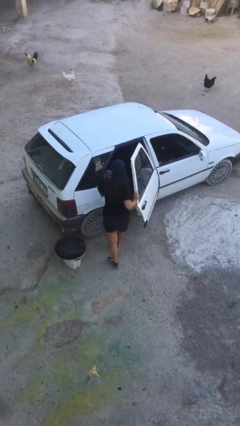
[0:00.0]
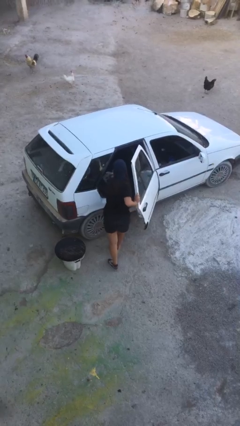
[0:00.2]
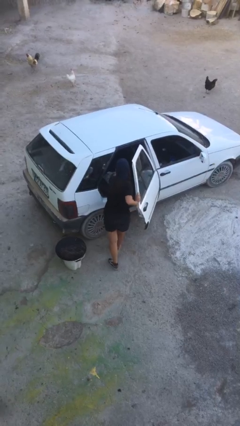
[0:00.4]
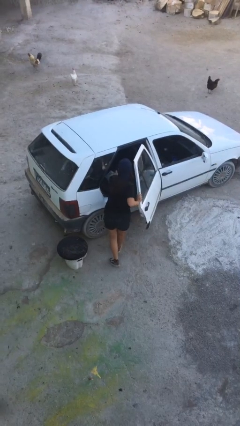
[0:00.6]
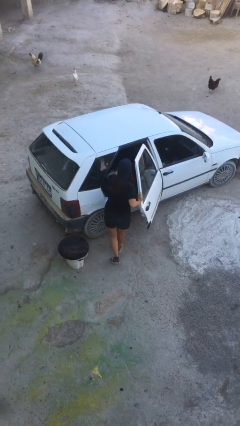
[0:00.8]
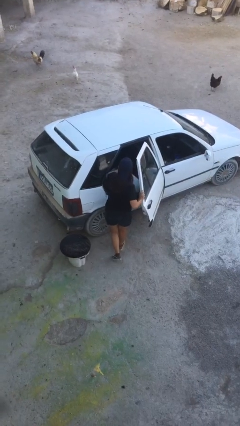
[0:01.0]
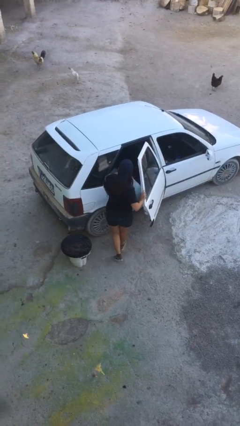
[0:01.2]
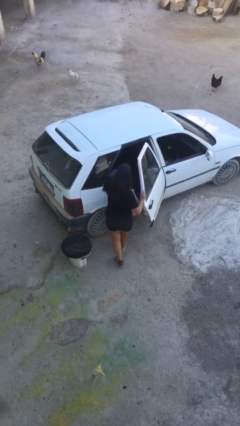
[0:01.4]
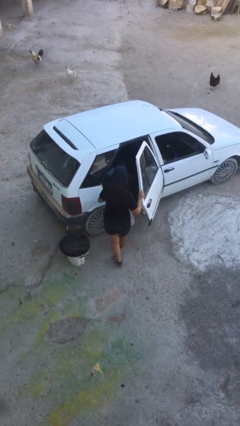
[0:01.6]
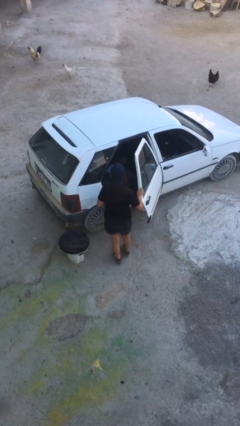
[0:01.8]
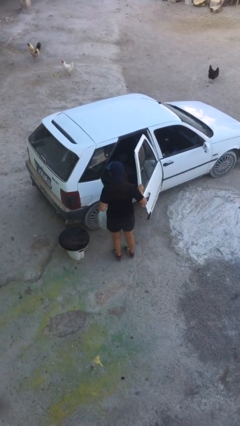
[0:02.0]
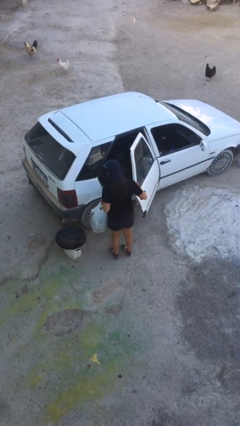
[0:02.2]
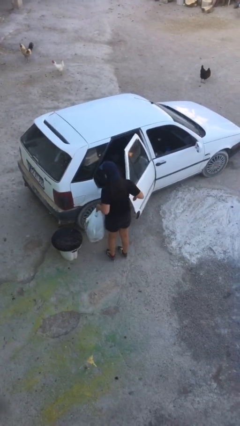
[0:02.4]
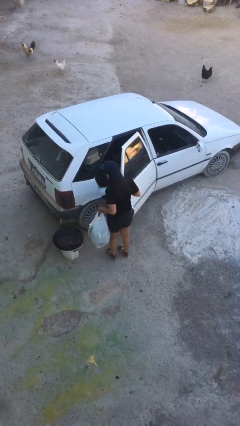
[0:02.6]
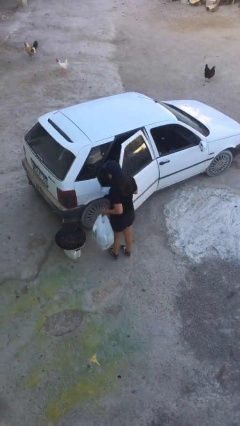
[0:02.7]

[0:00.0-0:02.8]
person unloads car

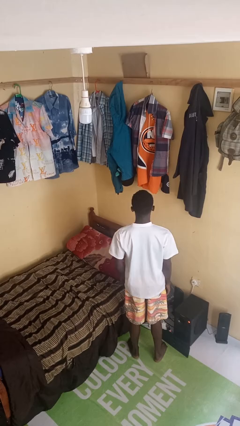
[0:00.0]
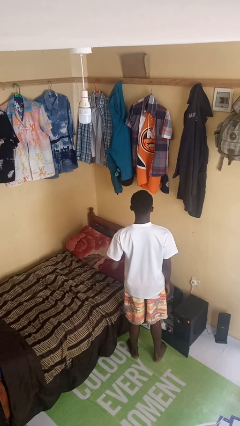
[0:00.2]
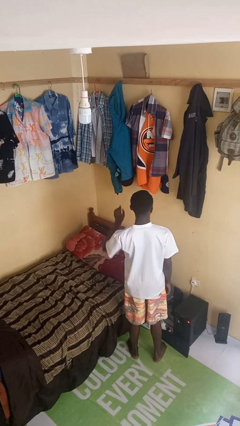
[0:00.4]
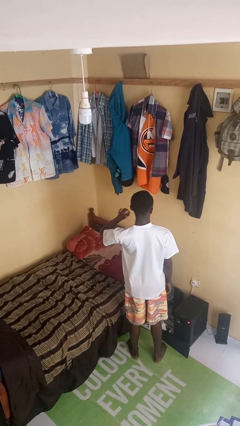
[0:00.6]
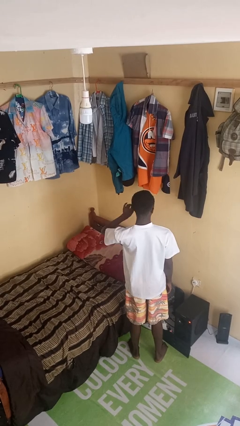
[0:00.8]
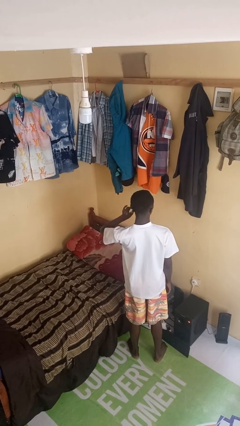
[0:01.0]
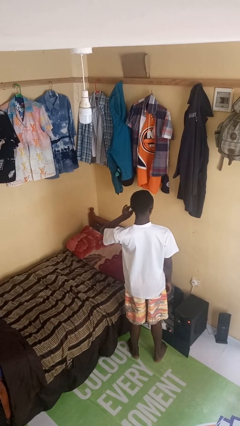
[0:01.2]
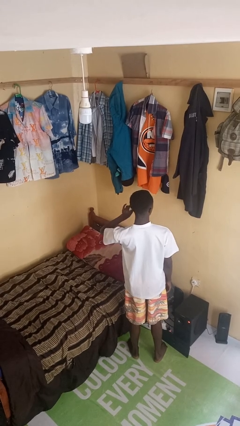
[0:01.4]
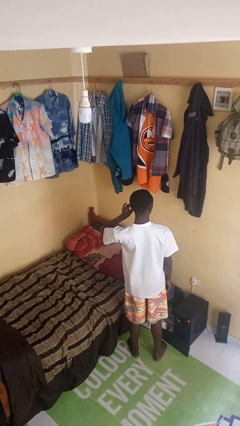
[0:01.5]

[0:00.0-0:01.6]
person gestures listen closely

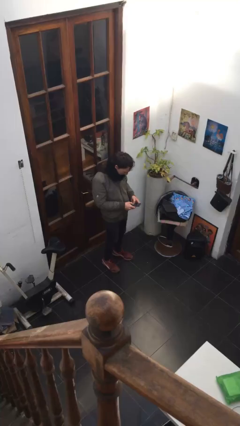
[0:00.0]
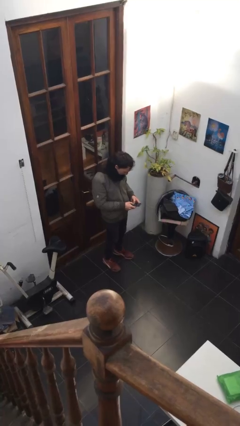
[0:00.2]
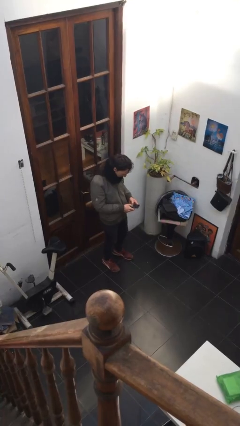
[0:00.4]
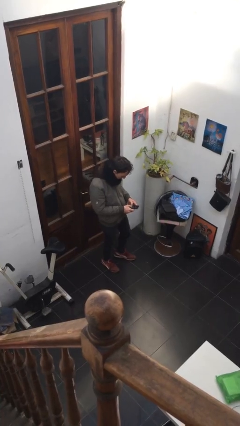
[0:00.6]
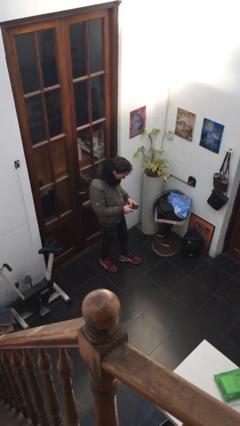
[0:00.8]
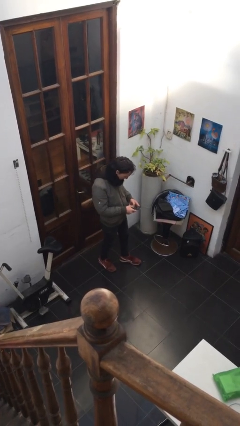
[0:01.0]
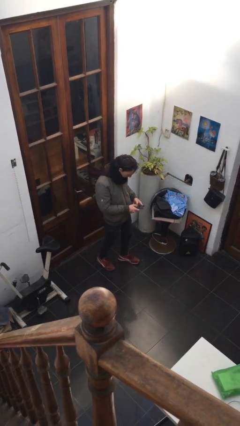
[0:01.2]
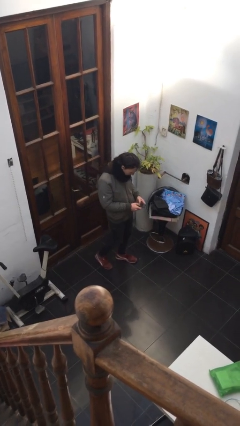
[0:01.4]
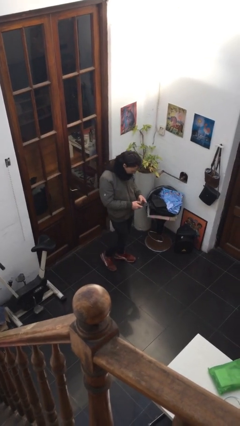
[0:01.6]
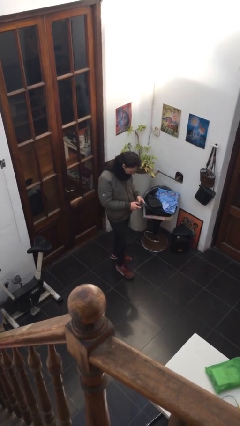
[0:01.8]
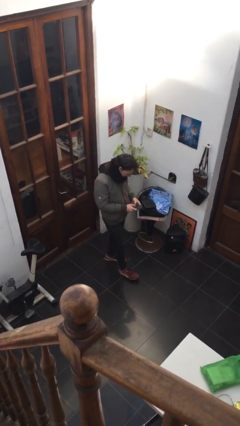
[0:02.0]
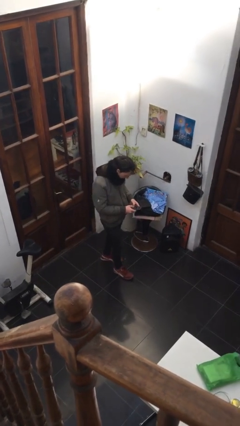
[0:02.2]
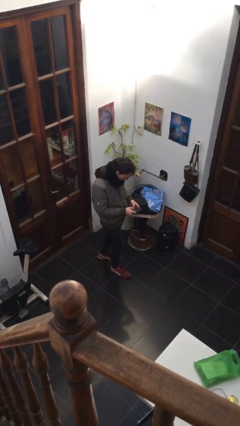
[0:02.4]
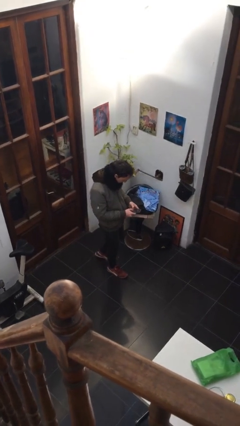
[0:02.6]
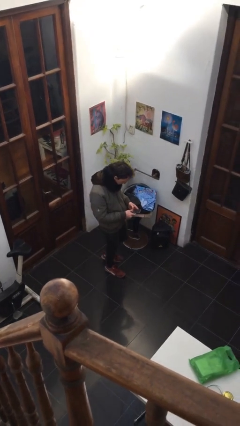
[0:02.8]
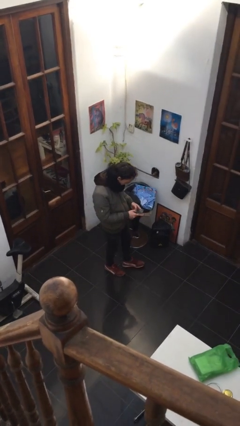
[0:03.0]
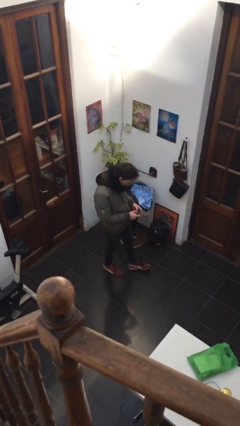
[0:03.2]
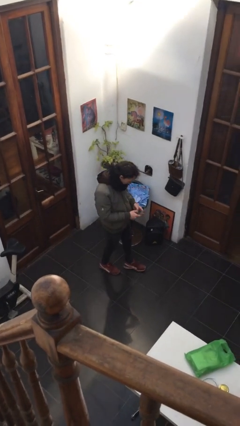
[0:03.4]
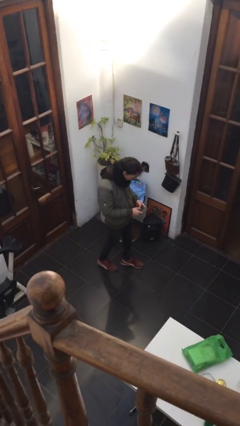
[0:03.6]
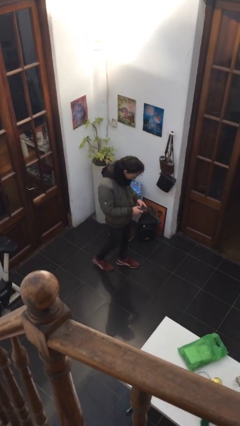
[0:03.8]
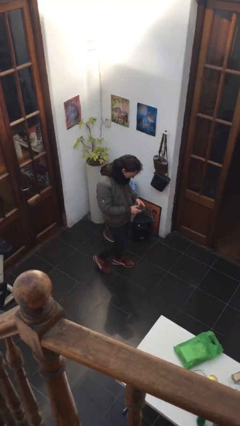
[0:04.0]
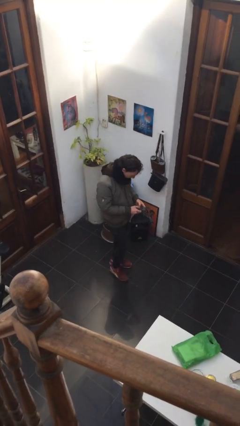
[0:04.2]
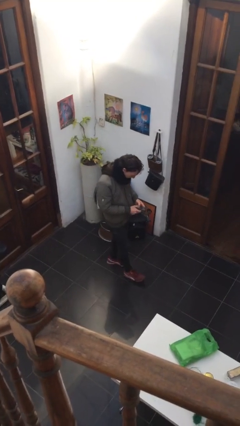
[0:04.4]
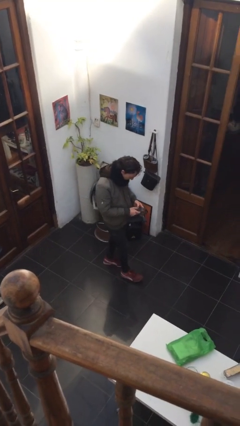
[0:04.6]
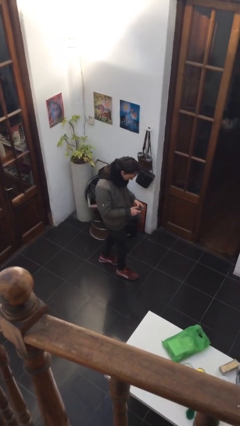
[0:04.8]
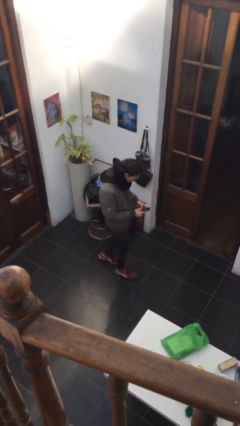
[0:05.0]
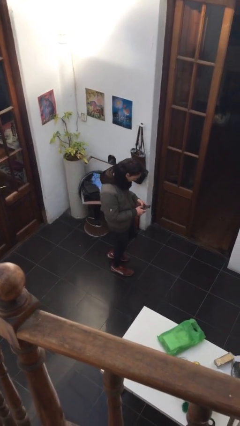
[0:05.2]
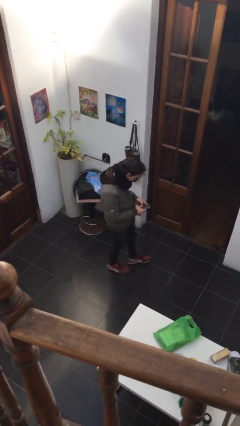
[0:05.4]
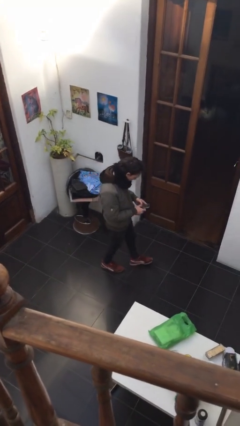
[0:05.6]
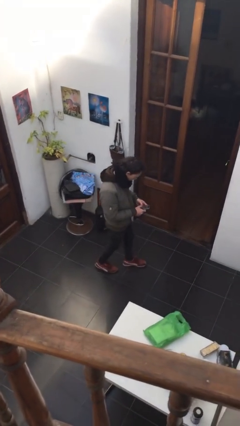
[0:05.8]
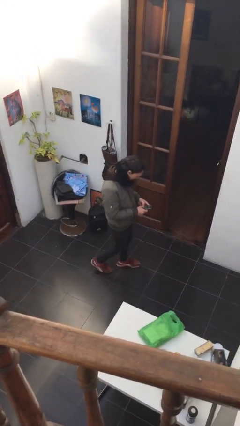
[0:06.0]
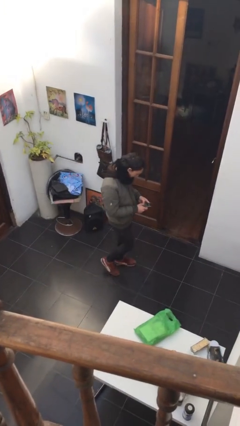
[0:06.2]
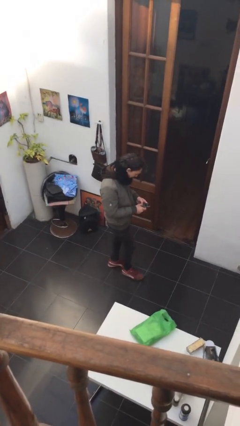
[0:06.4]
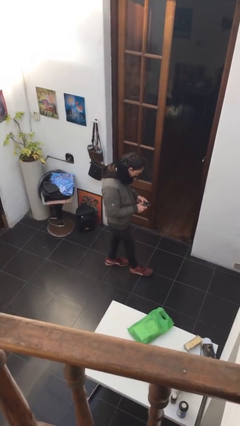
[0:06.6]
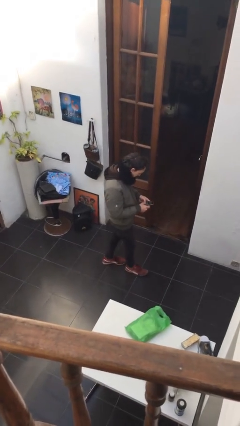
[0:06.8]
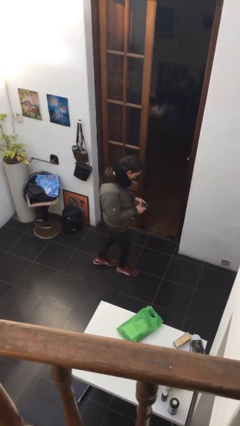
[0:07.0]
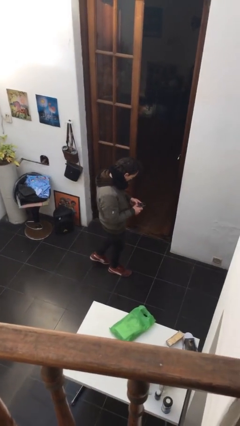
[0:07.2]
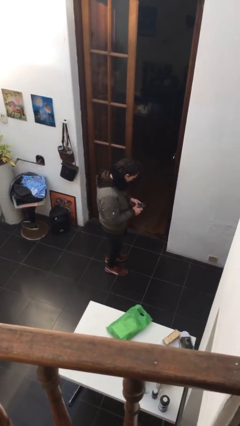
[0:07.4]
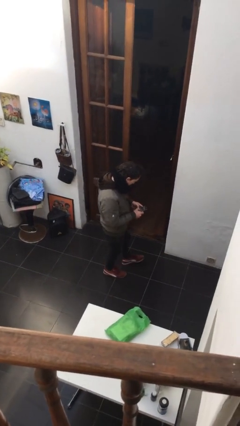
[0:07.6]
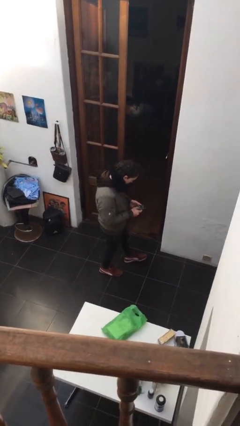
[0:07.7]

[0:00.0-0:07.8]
person texts on phone

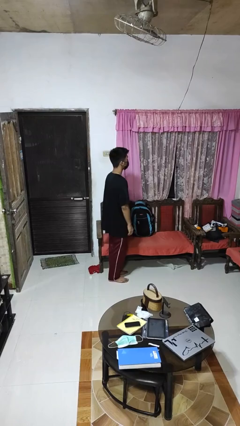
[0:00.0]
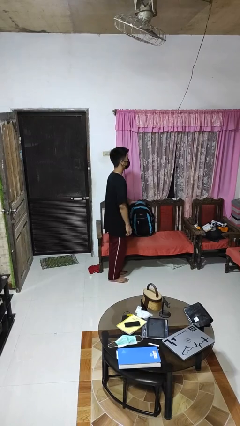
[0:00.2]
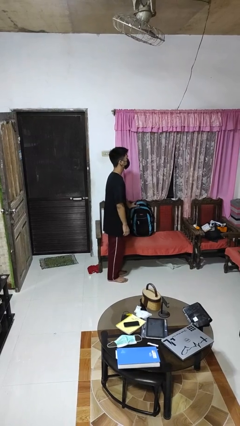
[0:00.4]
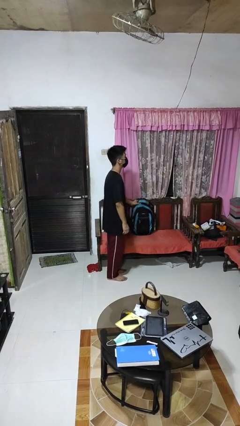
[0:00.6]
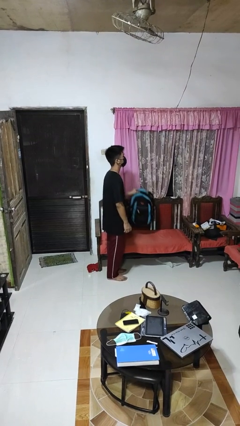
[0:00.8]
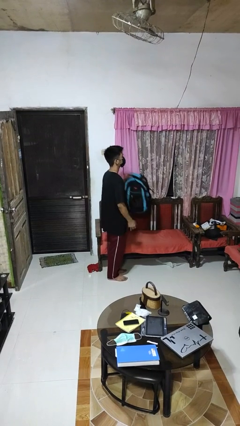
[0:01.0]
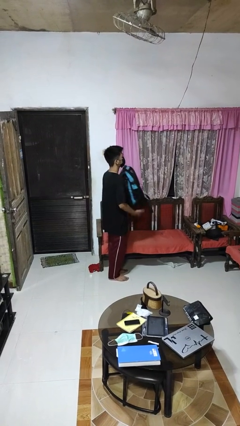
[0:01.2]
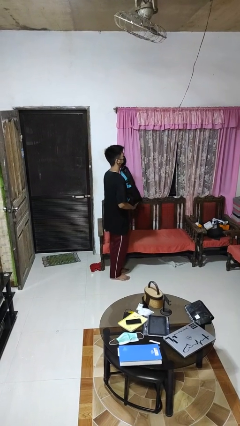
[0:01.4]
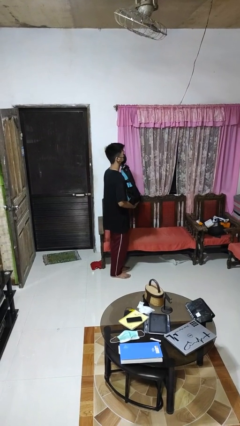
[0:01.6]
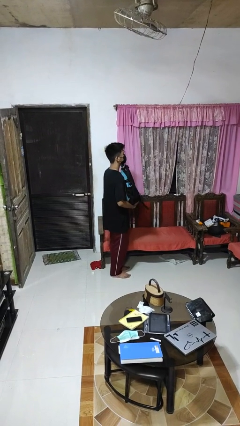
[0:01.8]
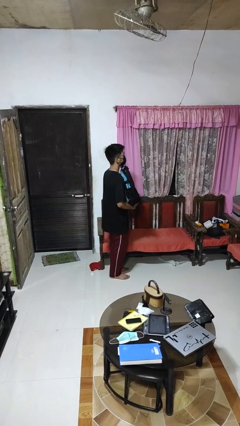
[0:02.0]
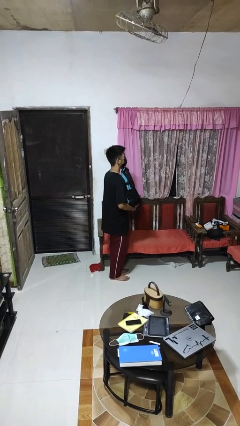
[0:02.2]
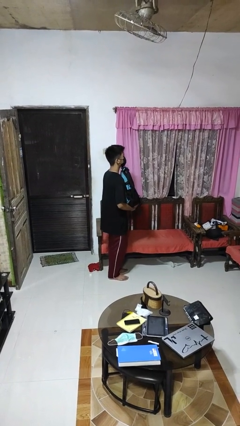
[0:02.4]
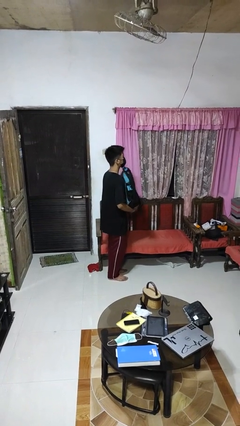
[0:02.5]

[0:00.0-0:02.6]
person picks up object from couch

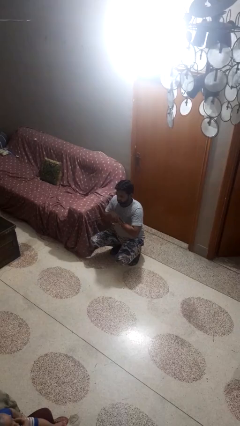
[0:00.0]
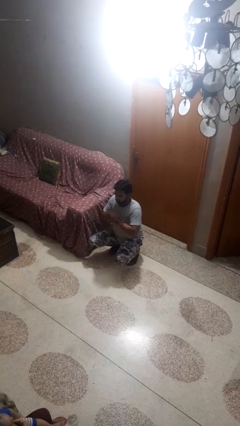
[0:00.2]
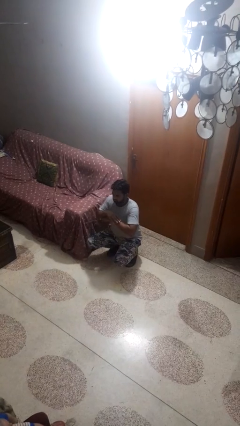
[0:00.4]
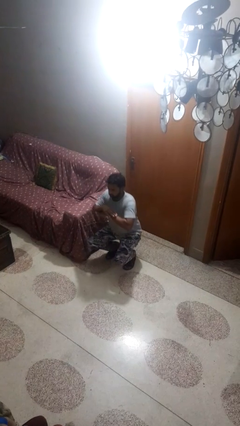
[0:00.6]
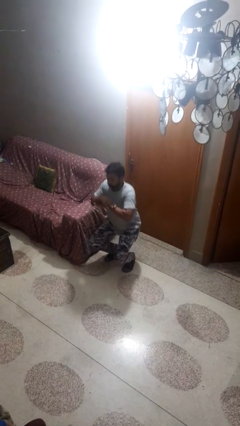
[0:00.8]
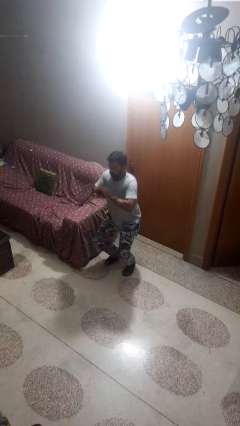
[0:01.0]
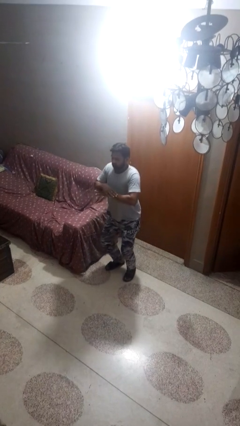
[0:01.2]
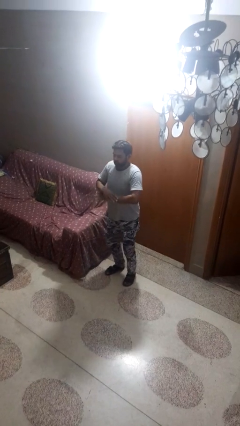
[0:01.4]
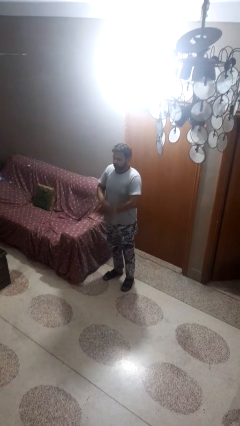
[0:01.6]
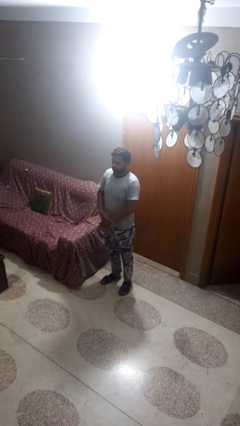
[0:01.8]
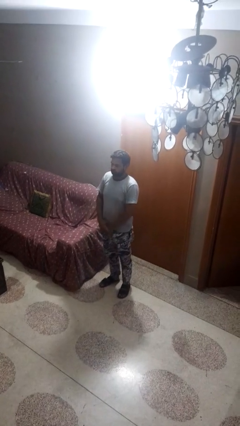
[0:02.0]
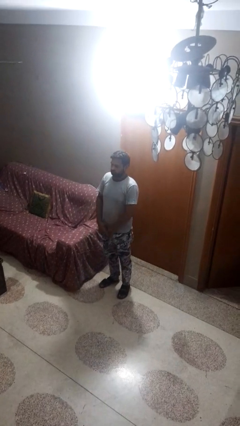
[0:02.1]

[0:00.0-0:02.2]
person stands up

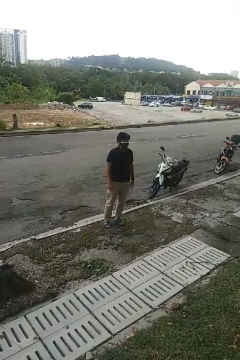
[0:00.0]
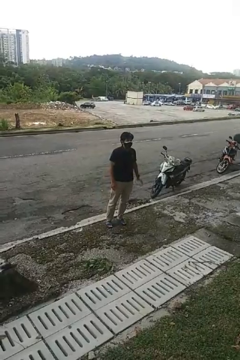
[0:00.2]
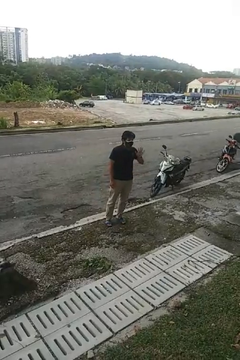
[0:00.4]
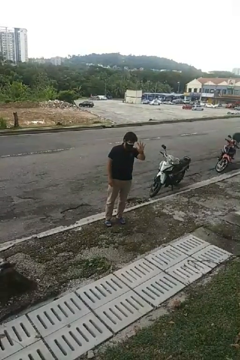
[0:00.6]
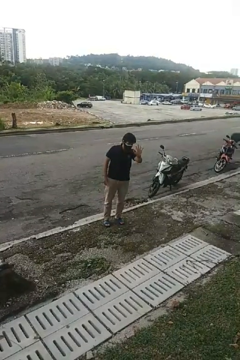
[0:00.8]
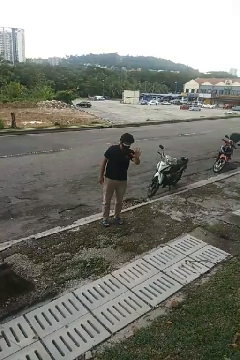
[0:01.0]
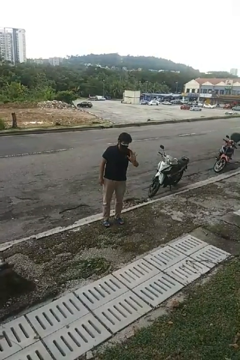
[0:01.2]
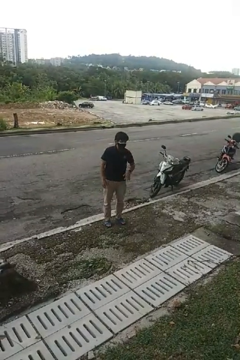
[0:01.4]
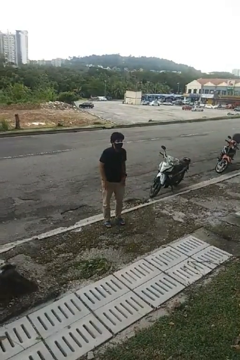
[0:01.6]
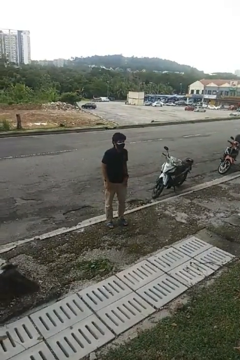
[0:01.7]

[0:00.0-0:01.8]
person gestures stop
